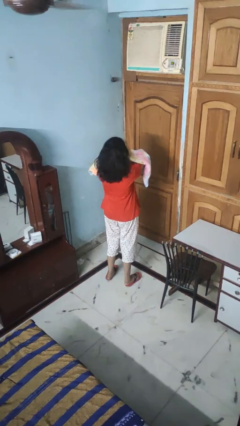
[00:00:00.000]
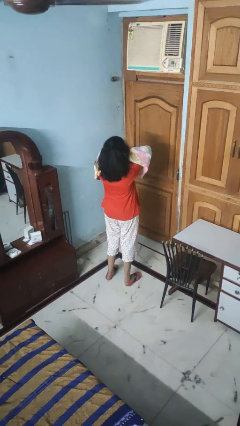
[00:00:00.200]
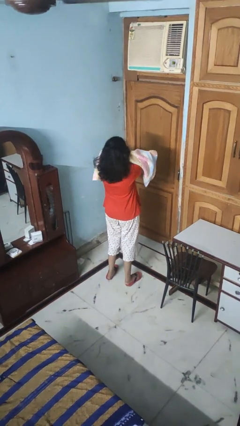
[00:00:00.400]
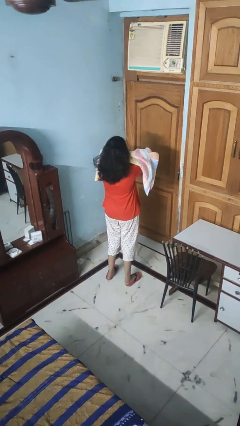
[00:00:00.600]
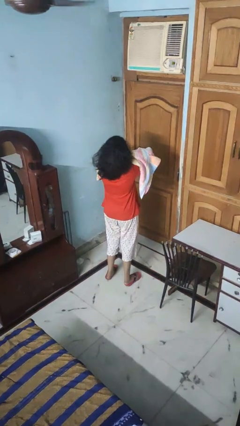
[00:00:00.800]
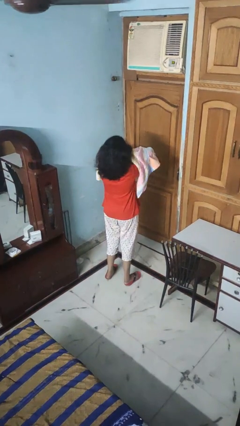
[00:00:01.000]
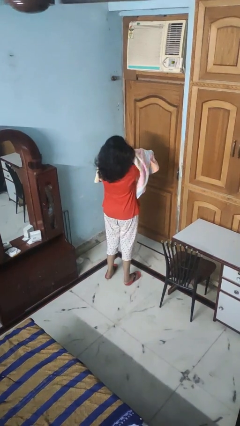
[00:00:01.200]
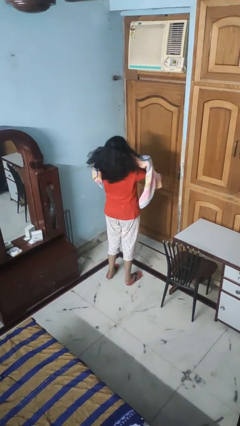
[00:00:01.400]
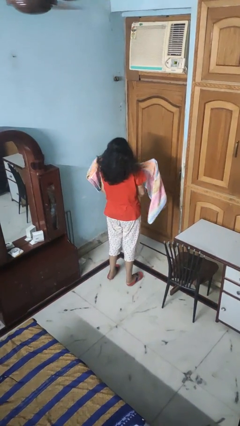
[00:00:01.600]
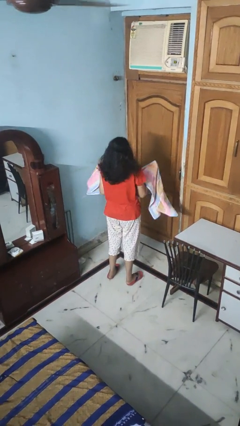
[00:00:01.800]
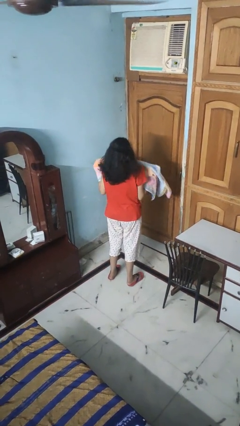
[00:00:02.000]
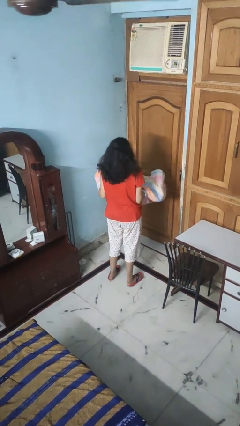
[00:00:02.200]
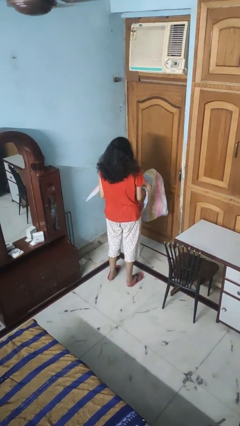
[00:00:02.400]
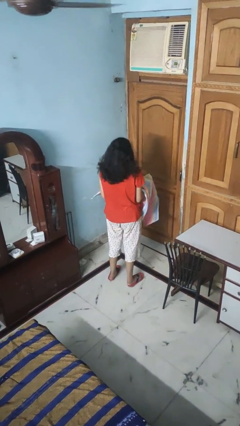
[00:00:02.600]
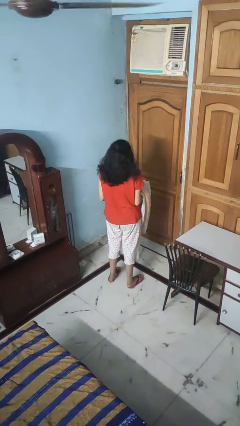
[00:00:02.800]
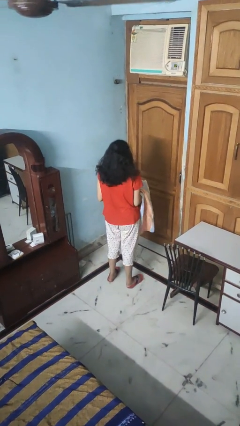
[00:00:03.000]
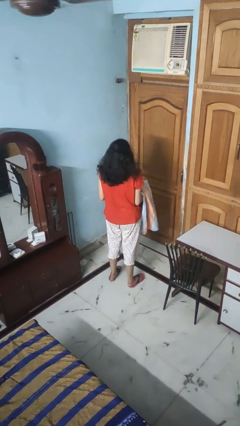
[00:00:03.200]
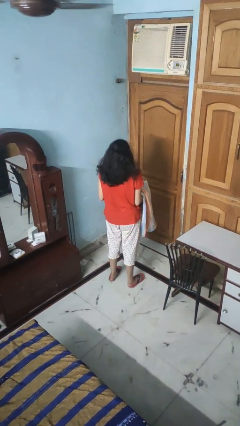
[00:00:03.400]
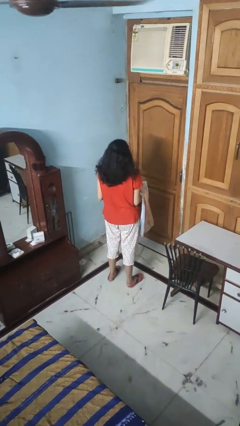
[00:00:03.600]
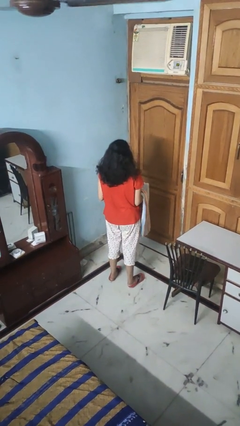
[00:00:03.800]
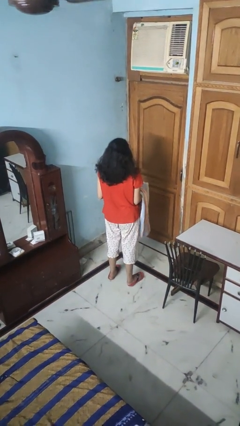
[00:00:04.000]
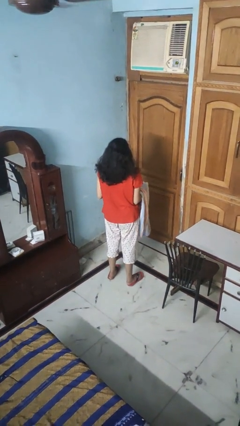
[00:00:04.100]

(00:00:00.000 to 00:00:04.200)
person dries hair with towel

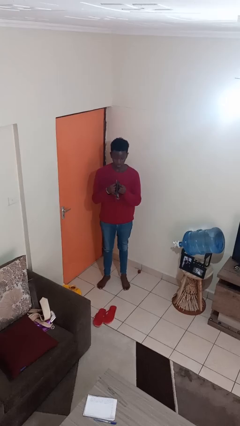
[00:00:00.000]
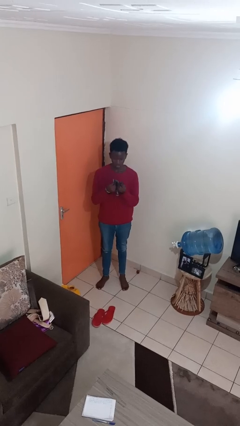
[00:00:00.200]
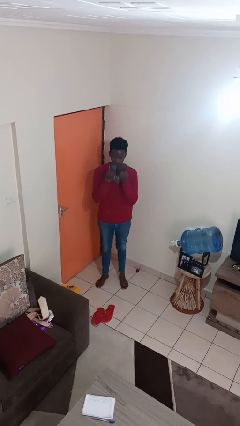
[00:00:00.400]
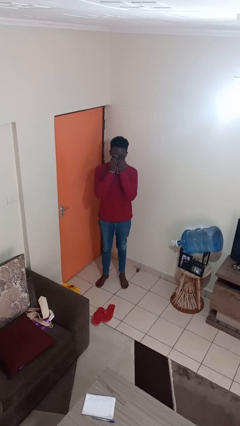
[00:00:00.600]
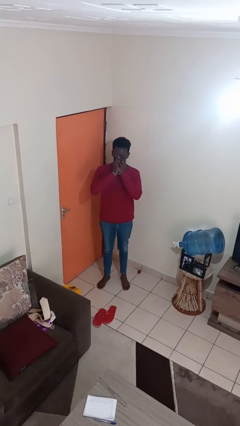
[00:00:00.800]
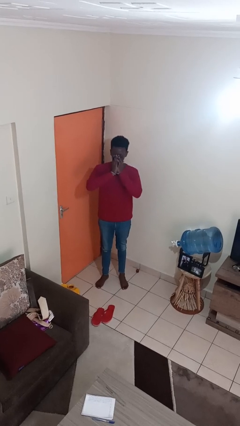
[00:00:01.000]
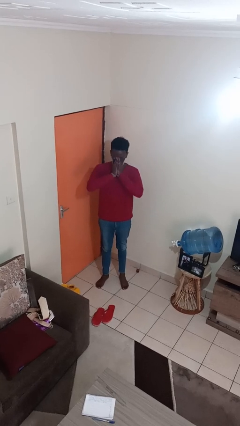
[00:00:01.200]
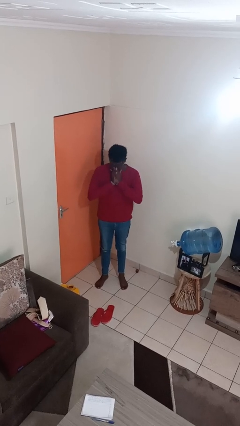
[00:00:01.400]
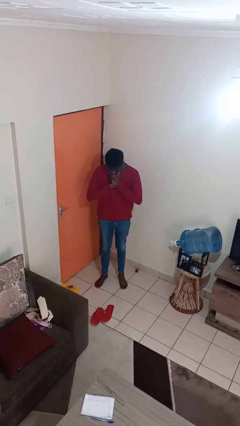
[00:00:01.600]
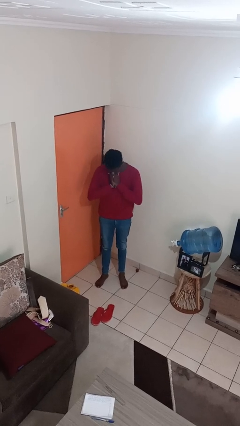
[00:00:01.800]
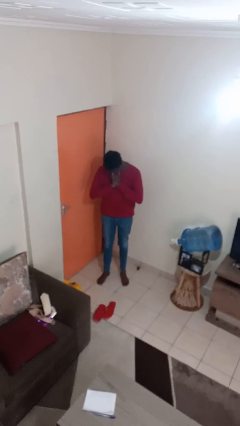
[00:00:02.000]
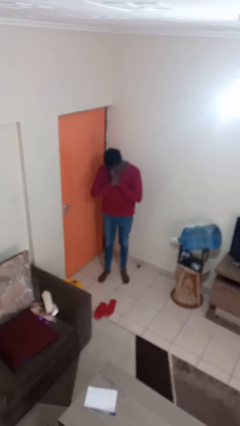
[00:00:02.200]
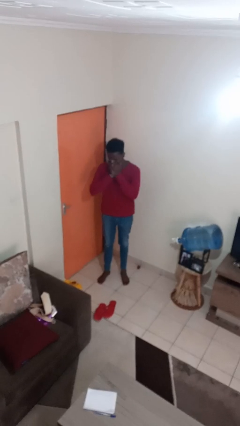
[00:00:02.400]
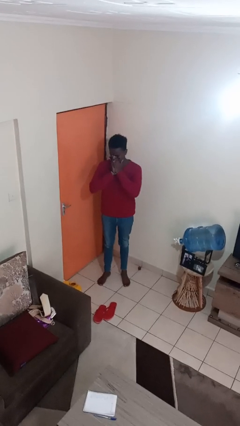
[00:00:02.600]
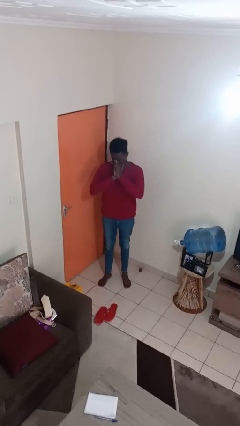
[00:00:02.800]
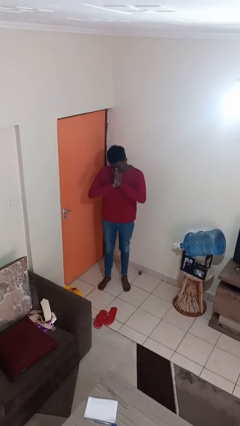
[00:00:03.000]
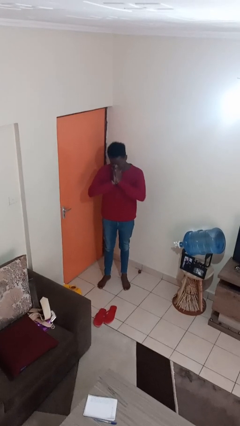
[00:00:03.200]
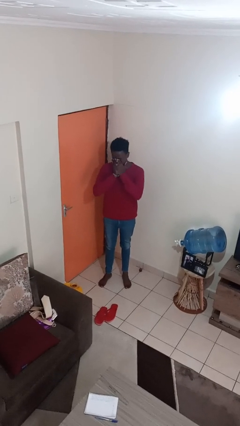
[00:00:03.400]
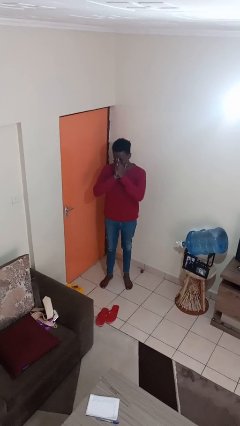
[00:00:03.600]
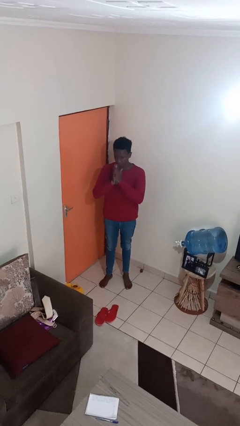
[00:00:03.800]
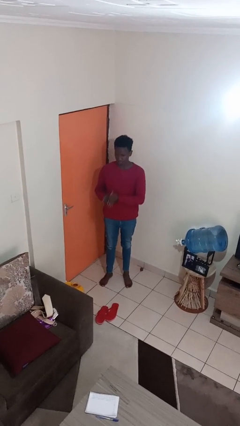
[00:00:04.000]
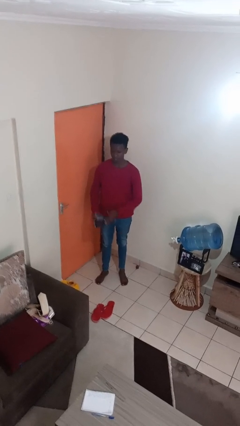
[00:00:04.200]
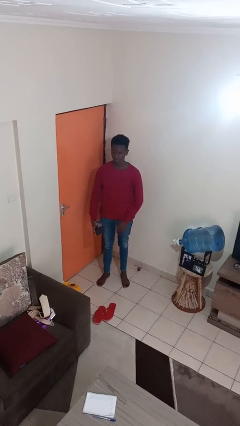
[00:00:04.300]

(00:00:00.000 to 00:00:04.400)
person blows nose

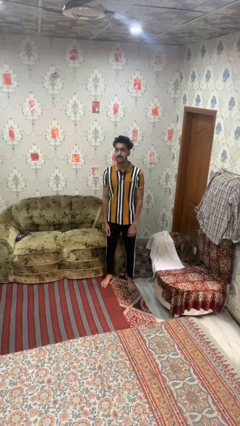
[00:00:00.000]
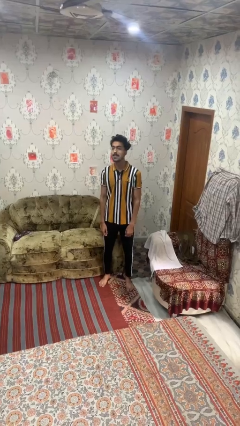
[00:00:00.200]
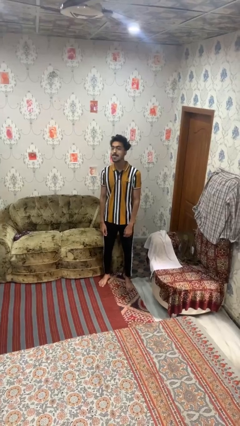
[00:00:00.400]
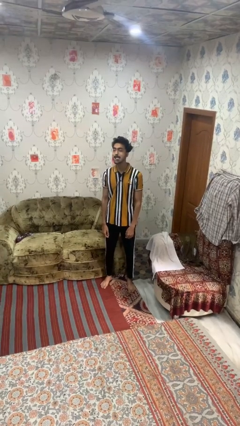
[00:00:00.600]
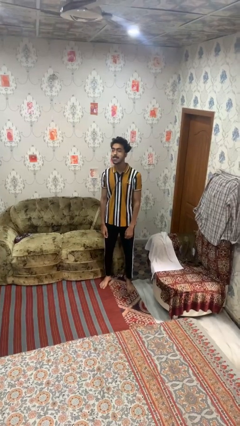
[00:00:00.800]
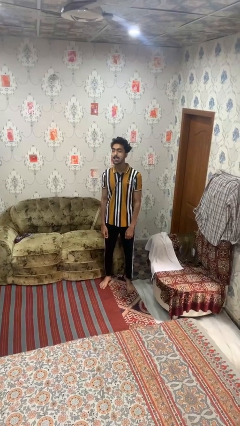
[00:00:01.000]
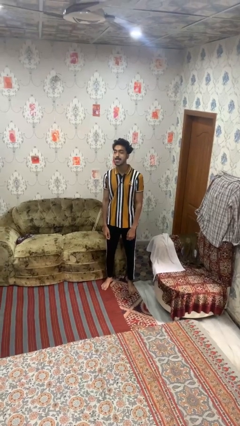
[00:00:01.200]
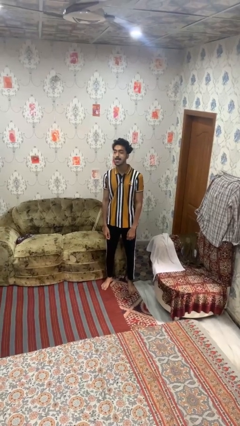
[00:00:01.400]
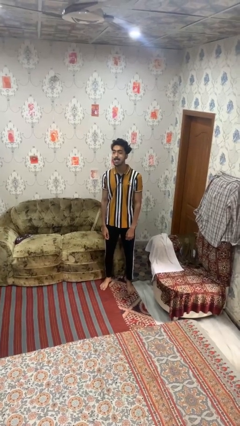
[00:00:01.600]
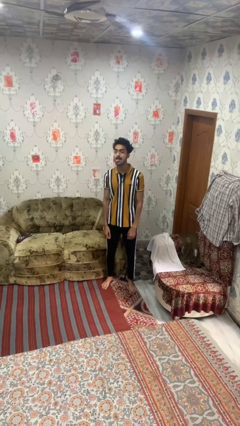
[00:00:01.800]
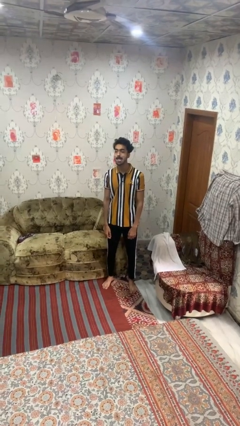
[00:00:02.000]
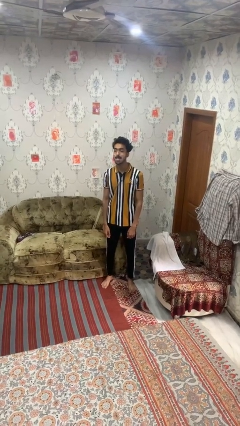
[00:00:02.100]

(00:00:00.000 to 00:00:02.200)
person sticks out tongue

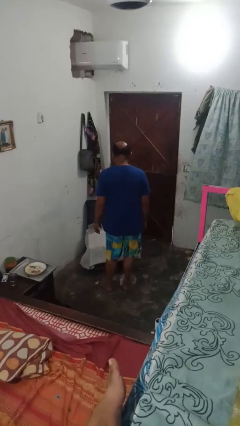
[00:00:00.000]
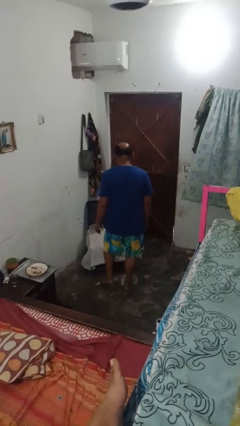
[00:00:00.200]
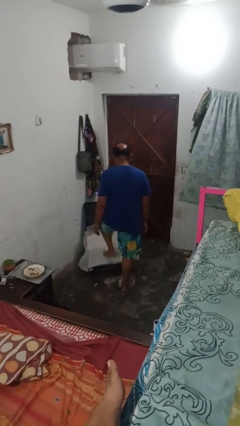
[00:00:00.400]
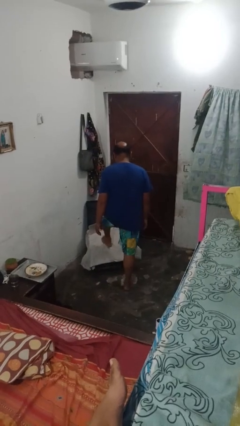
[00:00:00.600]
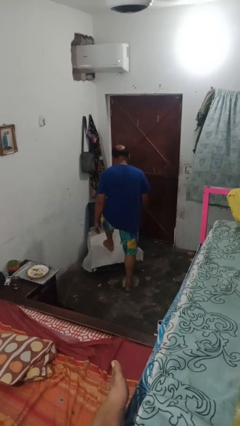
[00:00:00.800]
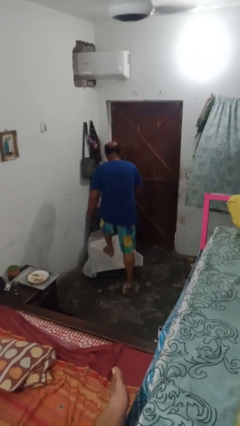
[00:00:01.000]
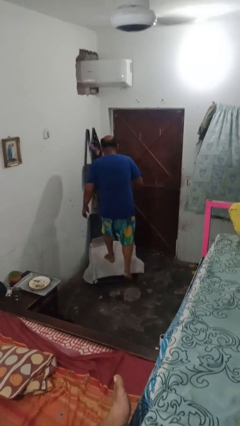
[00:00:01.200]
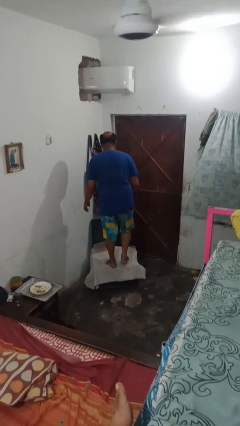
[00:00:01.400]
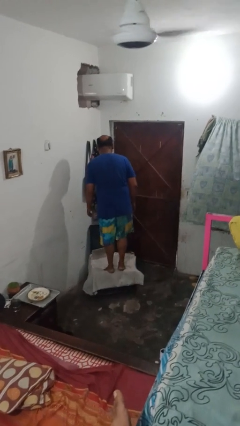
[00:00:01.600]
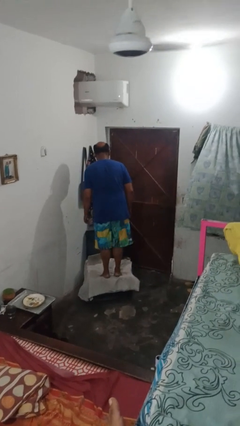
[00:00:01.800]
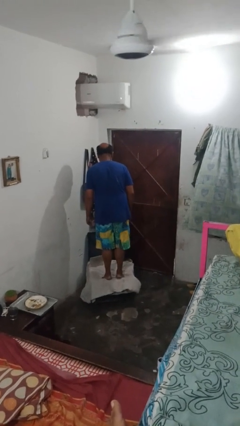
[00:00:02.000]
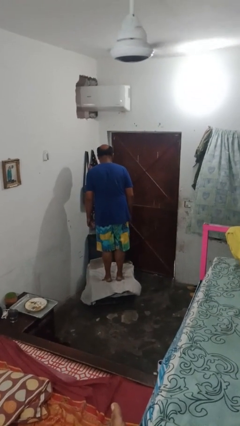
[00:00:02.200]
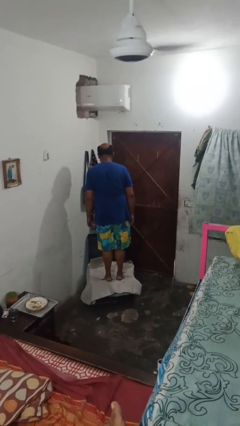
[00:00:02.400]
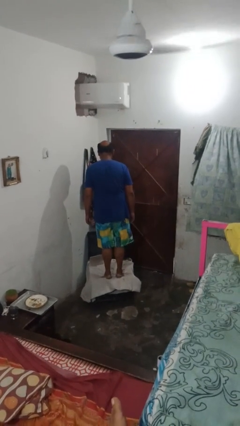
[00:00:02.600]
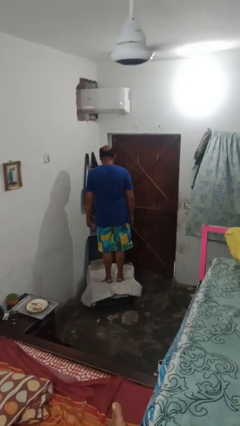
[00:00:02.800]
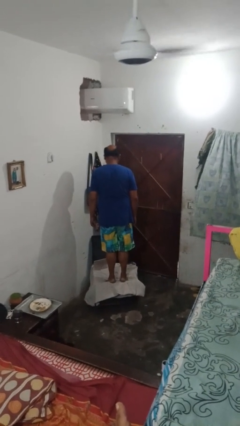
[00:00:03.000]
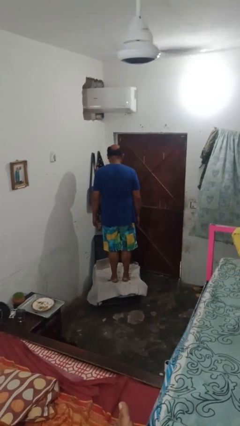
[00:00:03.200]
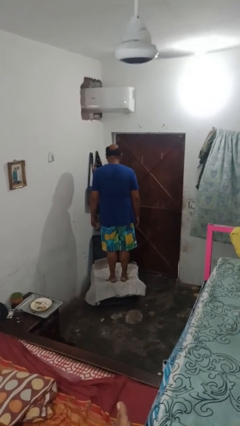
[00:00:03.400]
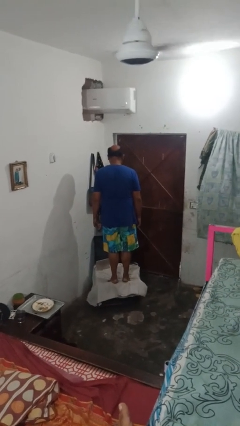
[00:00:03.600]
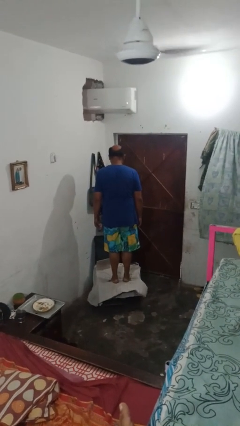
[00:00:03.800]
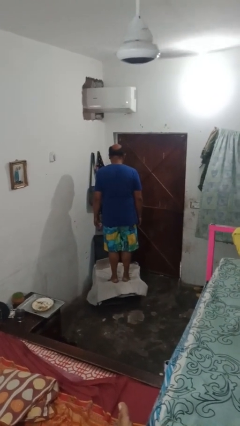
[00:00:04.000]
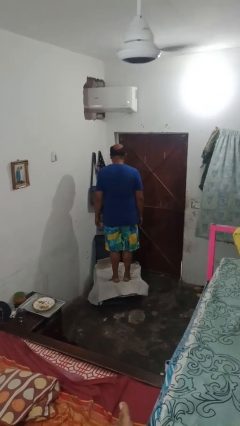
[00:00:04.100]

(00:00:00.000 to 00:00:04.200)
person climbs on couch

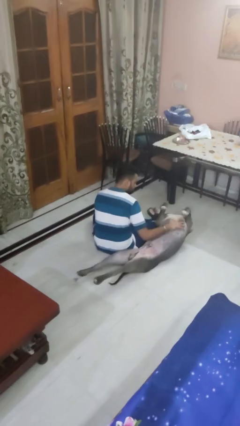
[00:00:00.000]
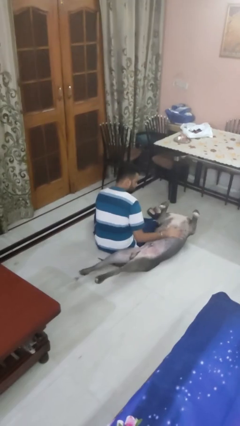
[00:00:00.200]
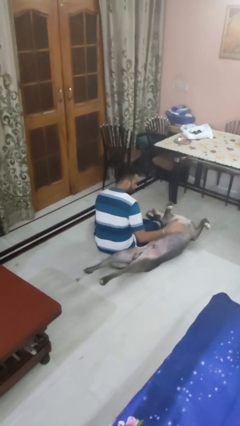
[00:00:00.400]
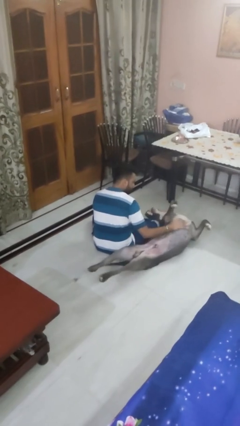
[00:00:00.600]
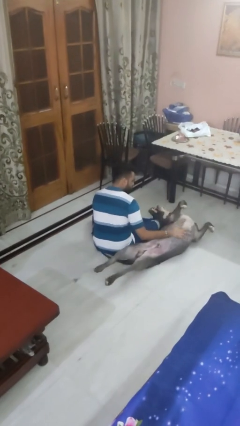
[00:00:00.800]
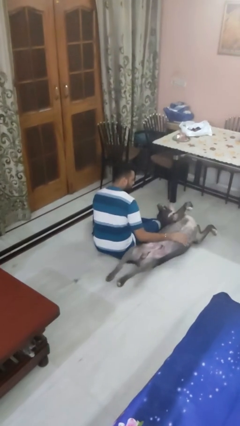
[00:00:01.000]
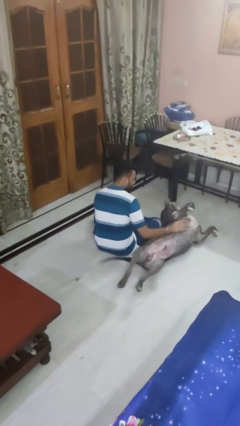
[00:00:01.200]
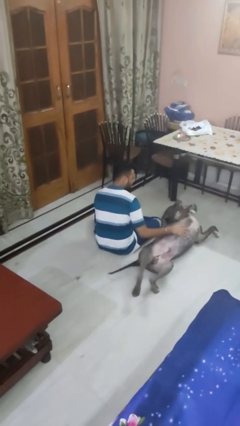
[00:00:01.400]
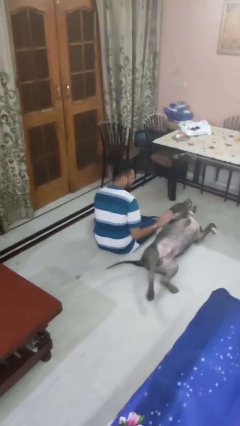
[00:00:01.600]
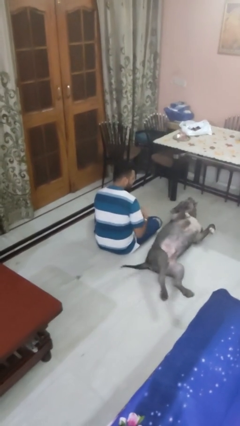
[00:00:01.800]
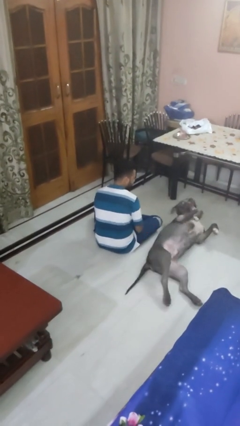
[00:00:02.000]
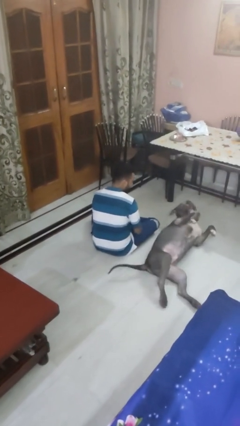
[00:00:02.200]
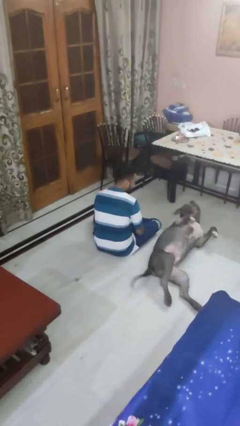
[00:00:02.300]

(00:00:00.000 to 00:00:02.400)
person pets dog
